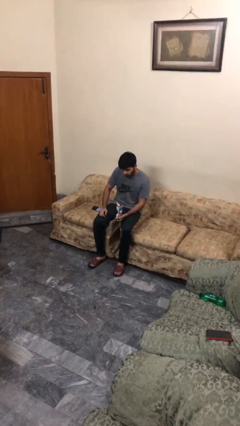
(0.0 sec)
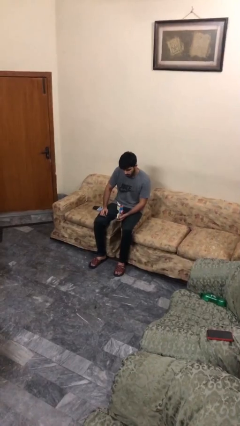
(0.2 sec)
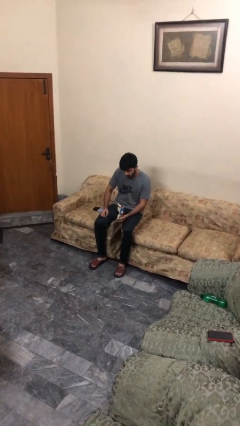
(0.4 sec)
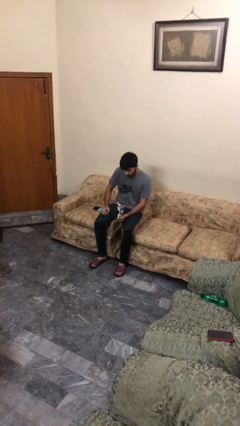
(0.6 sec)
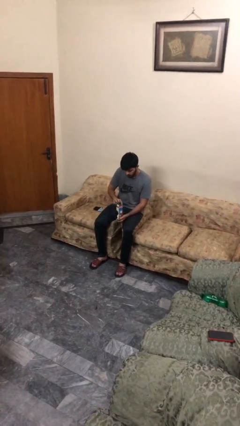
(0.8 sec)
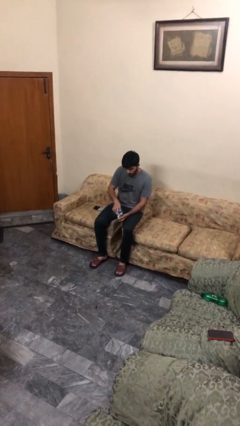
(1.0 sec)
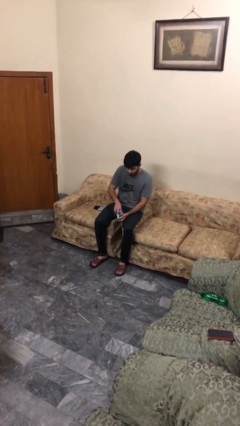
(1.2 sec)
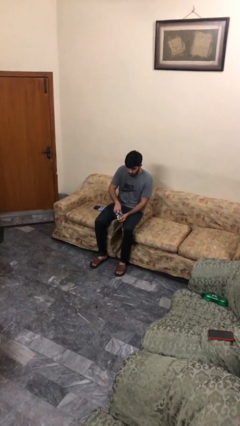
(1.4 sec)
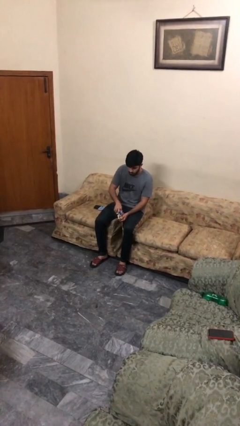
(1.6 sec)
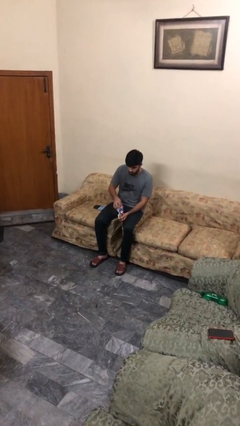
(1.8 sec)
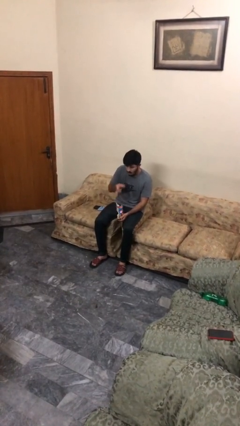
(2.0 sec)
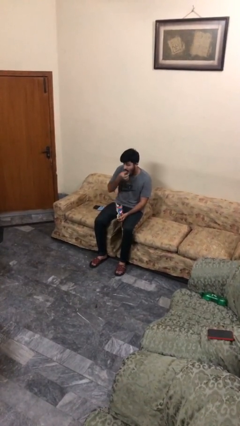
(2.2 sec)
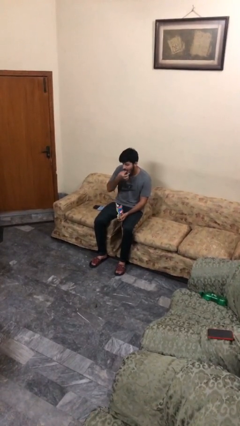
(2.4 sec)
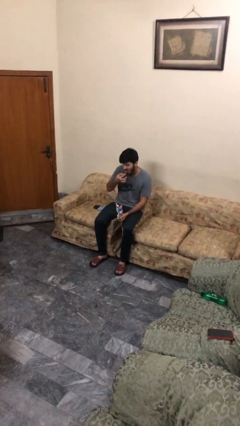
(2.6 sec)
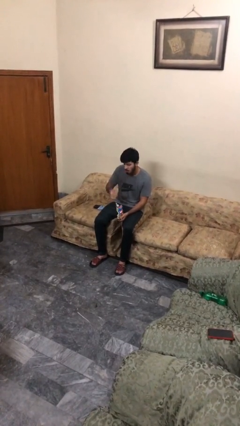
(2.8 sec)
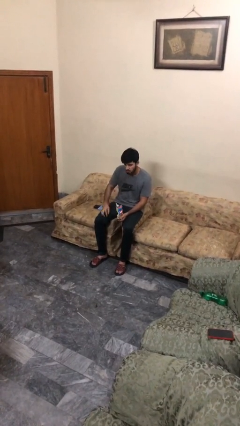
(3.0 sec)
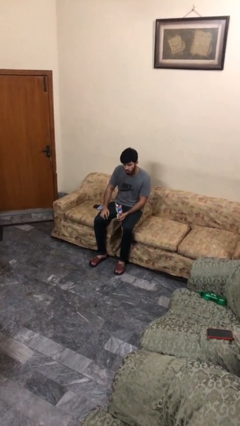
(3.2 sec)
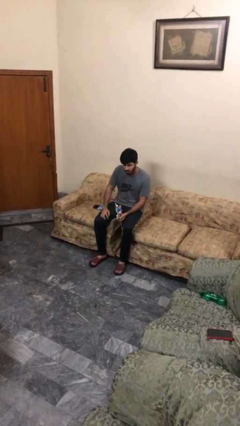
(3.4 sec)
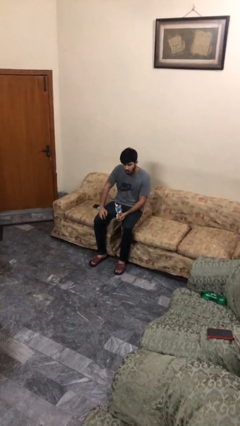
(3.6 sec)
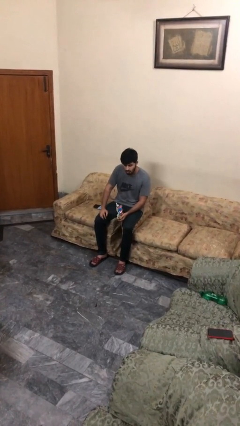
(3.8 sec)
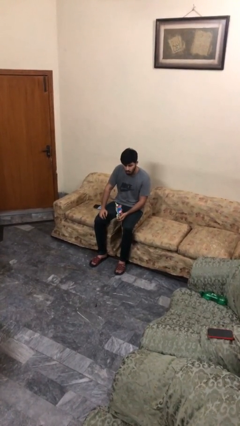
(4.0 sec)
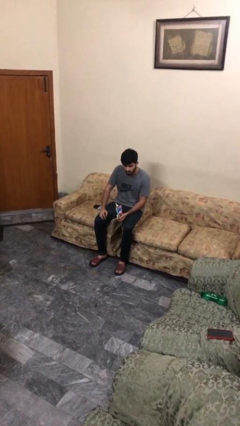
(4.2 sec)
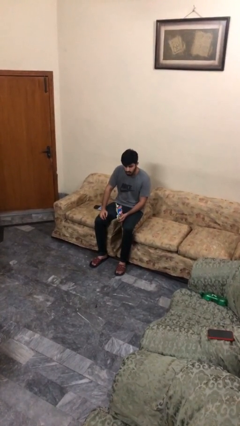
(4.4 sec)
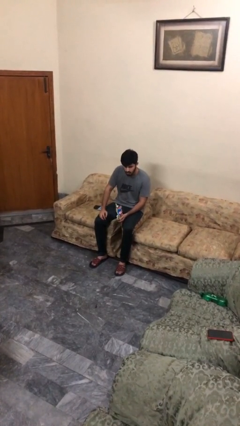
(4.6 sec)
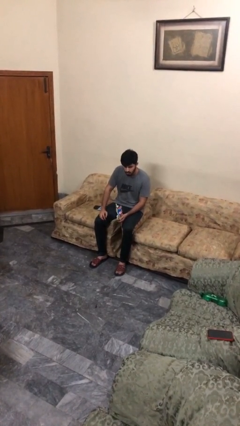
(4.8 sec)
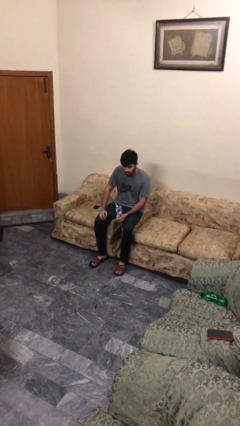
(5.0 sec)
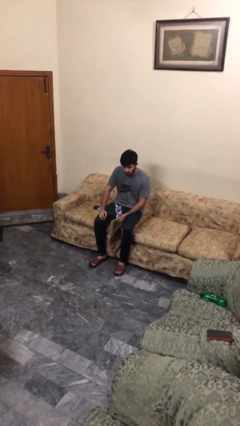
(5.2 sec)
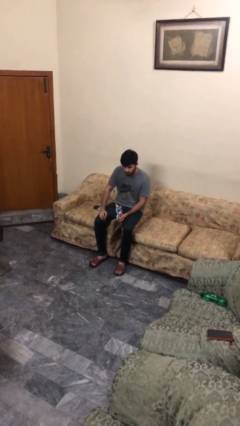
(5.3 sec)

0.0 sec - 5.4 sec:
person eats snack from bag

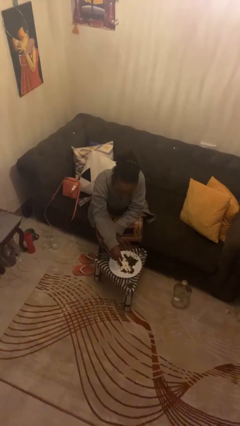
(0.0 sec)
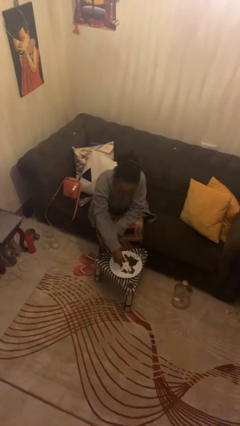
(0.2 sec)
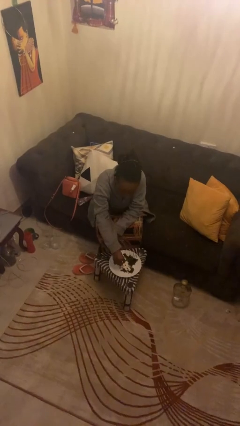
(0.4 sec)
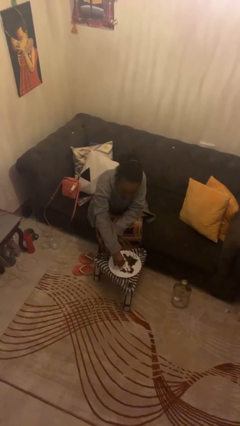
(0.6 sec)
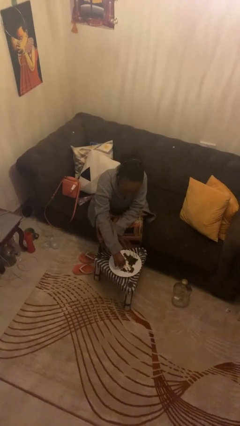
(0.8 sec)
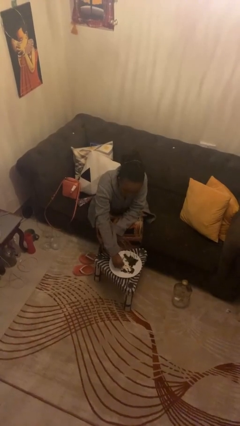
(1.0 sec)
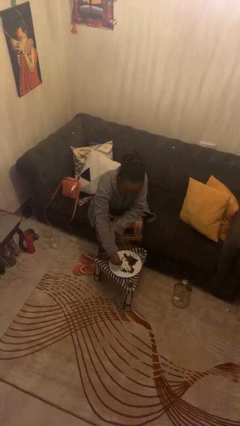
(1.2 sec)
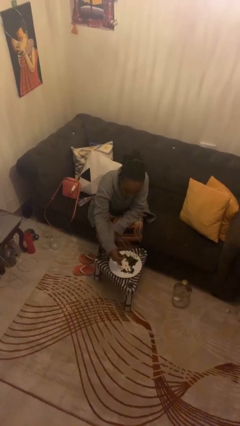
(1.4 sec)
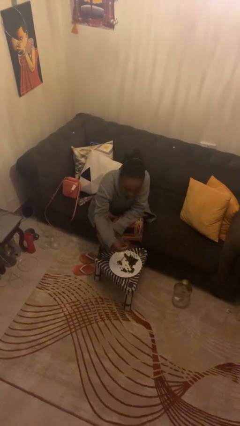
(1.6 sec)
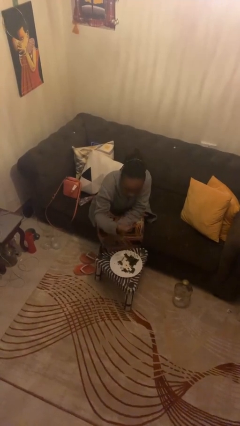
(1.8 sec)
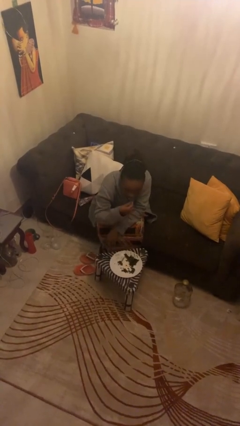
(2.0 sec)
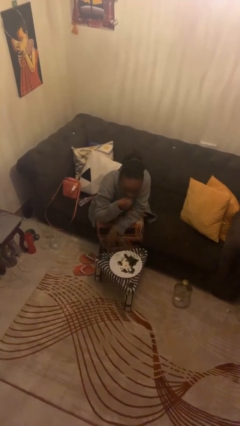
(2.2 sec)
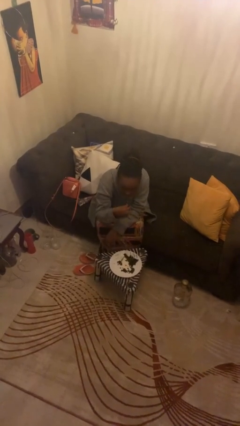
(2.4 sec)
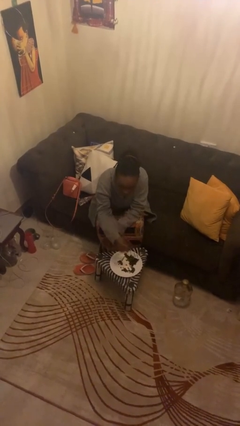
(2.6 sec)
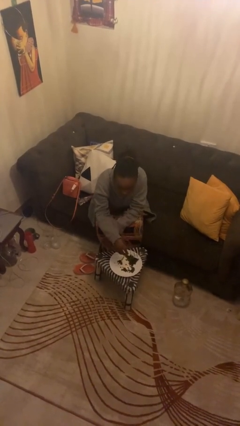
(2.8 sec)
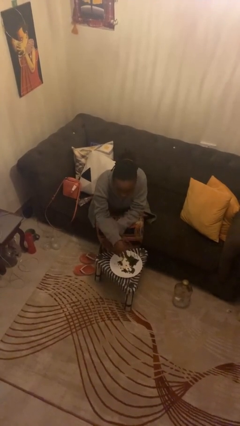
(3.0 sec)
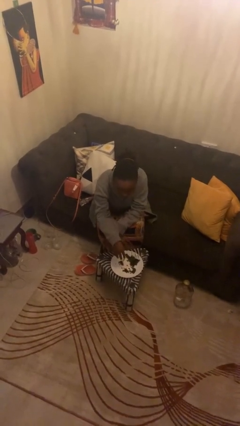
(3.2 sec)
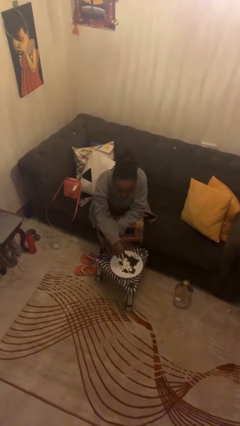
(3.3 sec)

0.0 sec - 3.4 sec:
person eats with hands

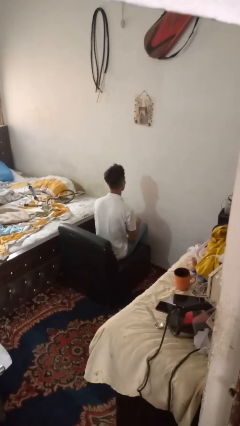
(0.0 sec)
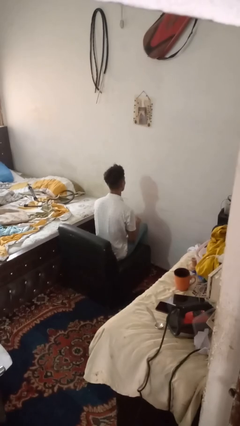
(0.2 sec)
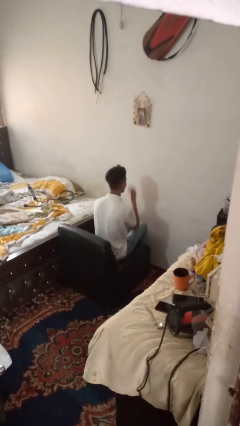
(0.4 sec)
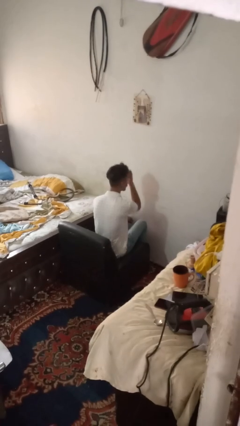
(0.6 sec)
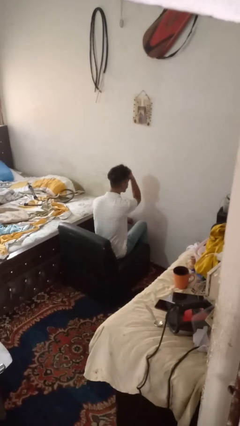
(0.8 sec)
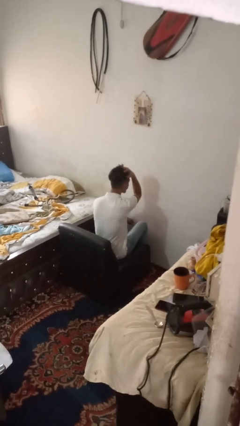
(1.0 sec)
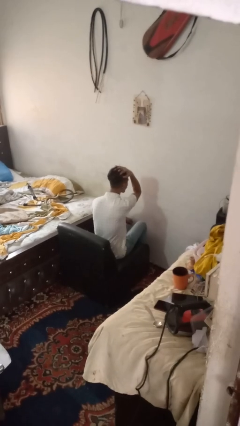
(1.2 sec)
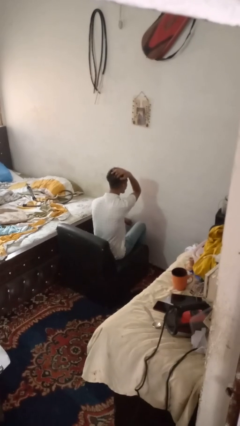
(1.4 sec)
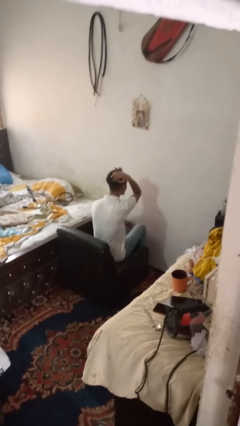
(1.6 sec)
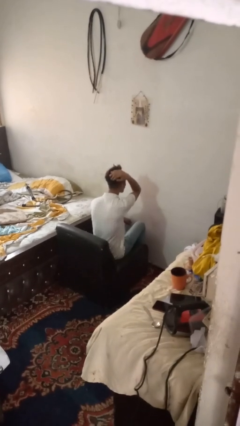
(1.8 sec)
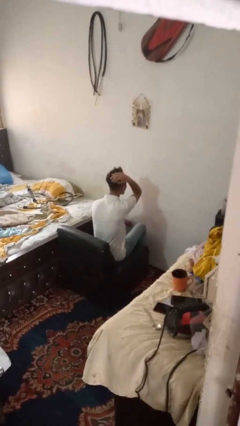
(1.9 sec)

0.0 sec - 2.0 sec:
person strokes hair

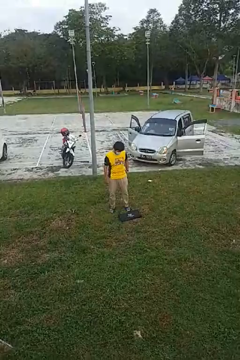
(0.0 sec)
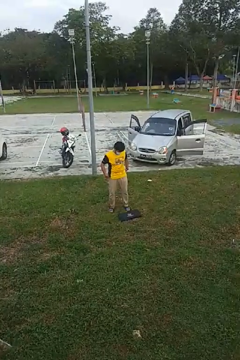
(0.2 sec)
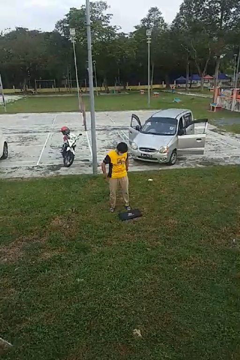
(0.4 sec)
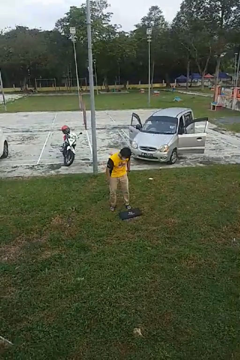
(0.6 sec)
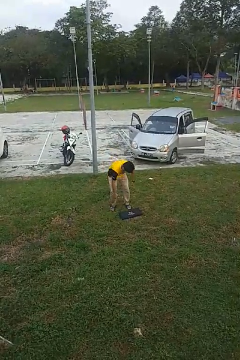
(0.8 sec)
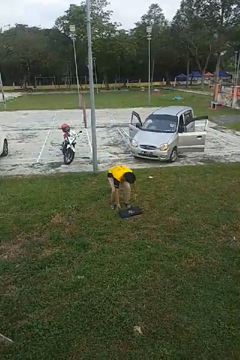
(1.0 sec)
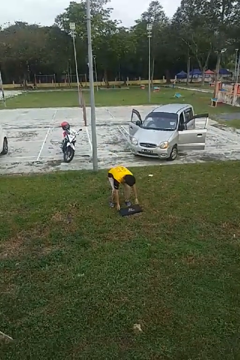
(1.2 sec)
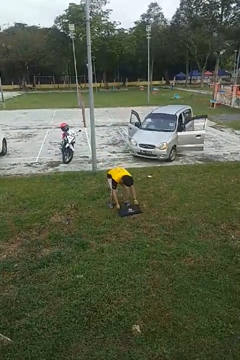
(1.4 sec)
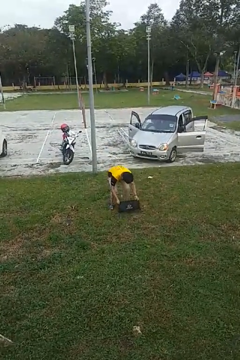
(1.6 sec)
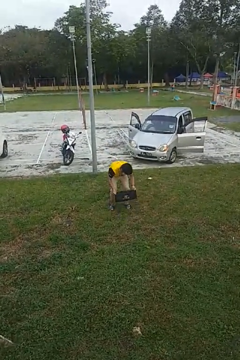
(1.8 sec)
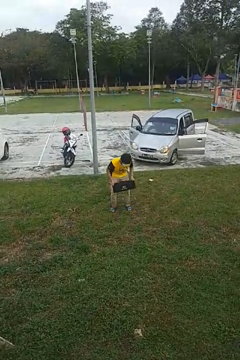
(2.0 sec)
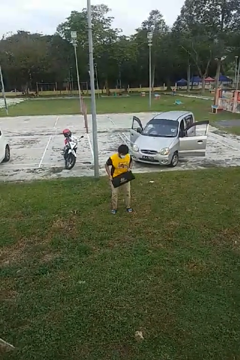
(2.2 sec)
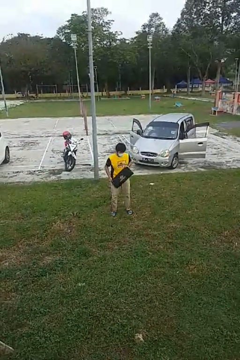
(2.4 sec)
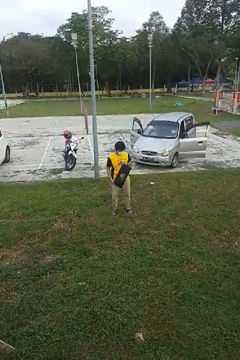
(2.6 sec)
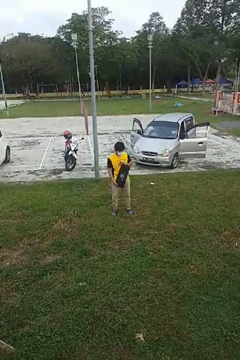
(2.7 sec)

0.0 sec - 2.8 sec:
person picks up object from floor

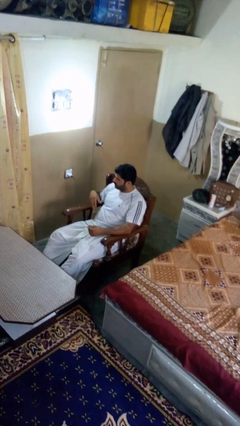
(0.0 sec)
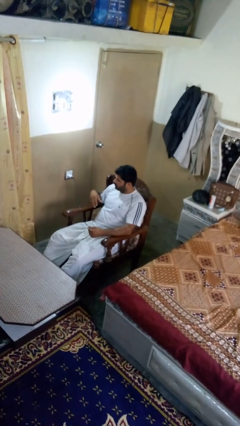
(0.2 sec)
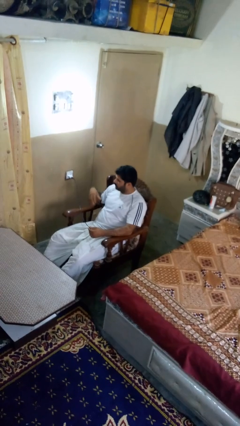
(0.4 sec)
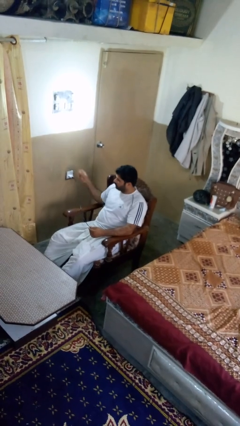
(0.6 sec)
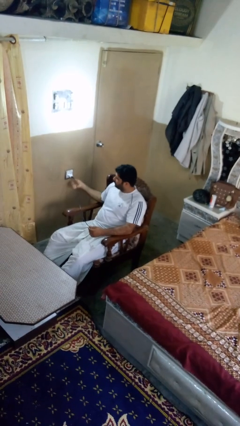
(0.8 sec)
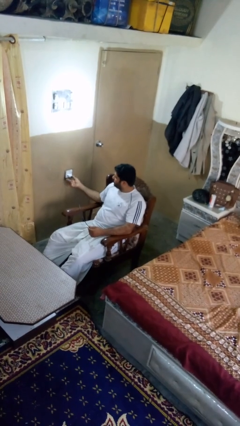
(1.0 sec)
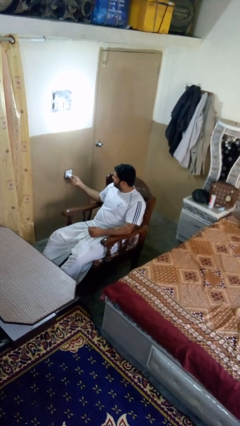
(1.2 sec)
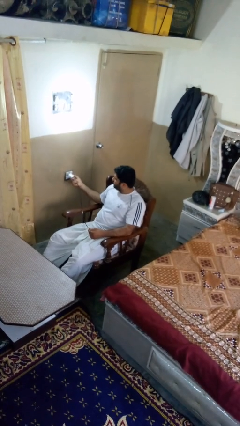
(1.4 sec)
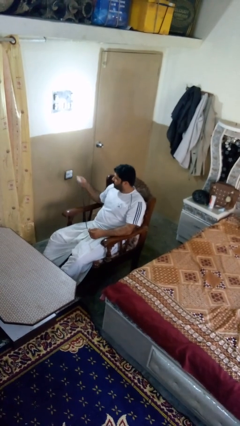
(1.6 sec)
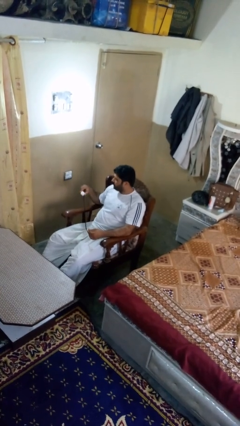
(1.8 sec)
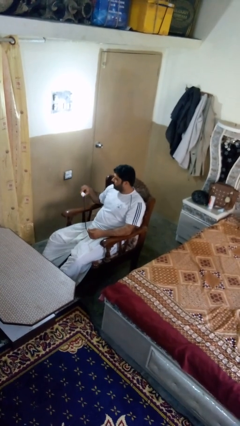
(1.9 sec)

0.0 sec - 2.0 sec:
person unplugs from electrical socket

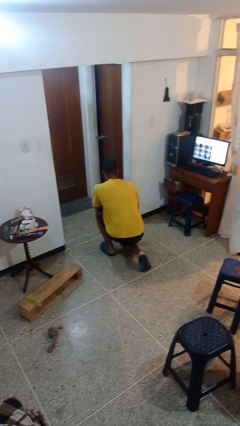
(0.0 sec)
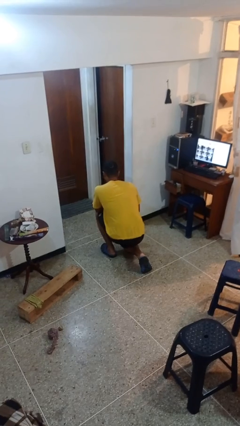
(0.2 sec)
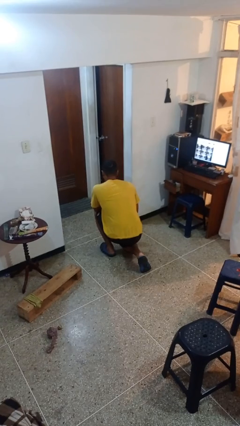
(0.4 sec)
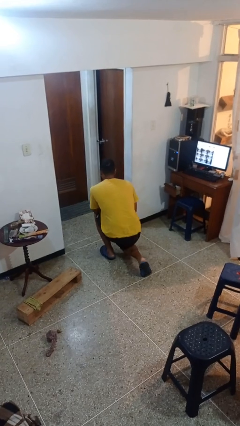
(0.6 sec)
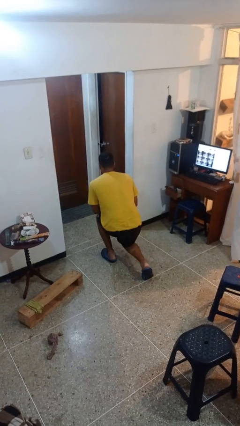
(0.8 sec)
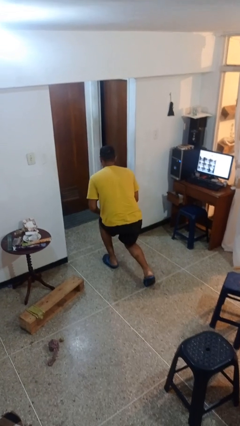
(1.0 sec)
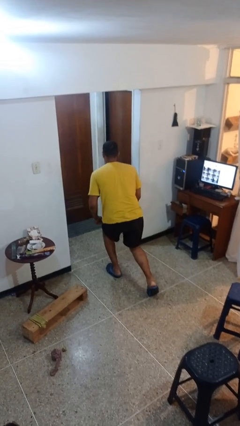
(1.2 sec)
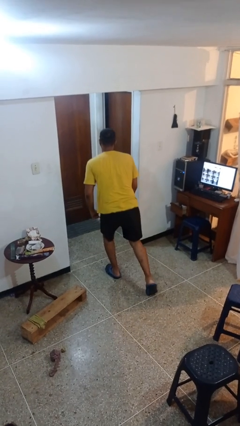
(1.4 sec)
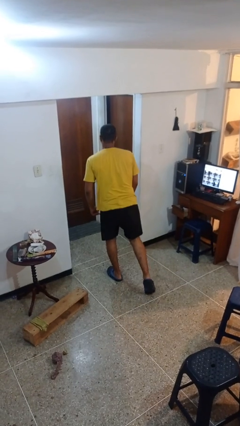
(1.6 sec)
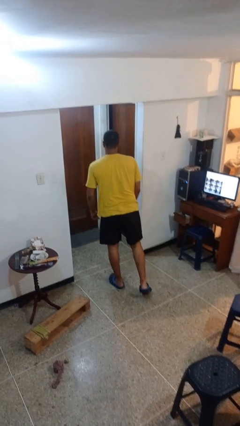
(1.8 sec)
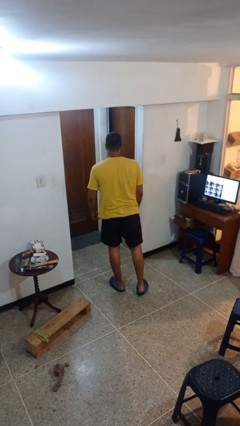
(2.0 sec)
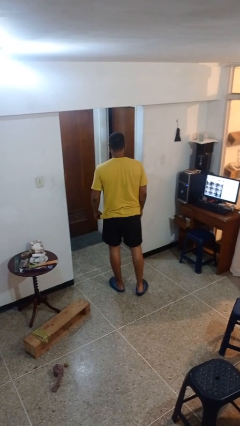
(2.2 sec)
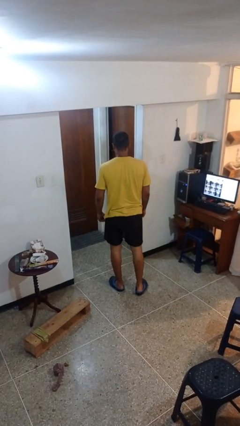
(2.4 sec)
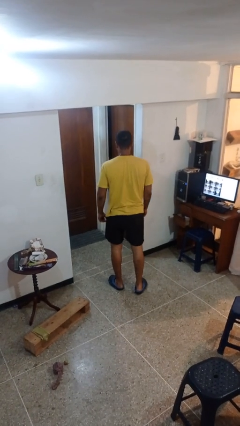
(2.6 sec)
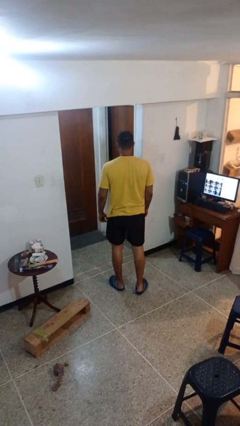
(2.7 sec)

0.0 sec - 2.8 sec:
person stands up from floor
